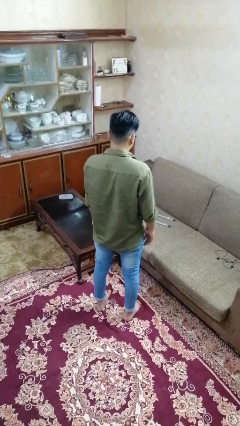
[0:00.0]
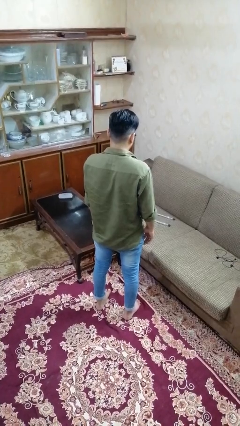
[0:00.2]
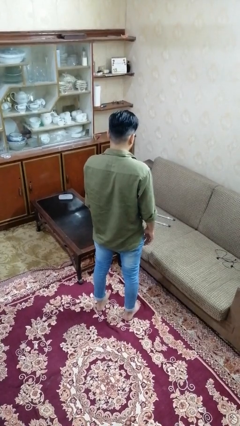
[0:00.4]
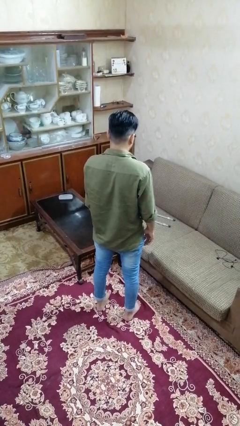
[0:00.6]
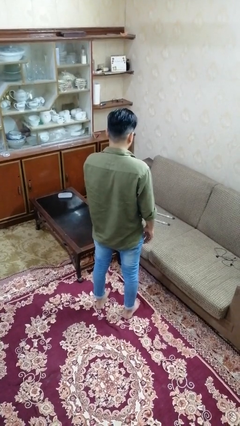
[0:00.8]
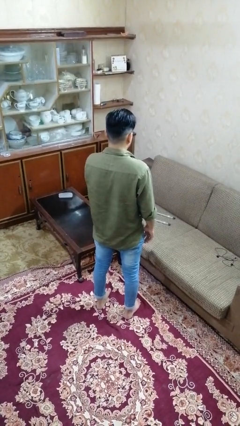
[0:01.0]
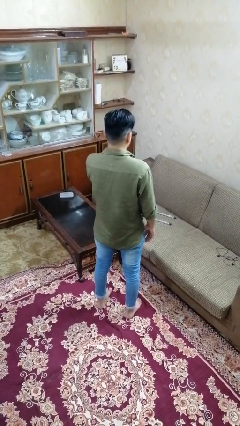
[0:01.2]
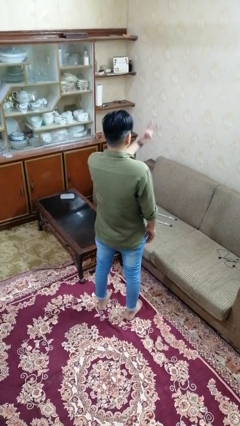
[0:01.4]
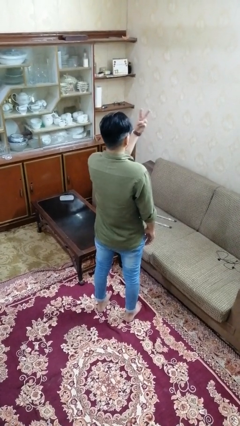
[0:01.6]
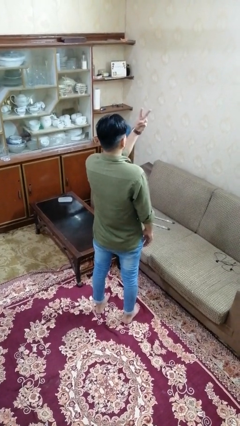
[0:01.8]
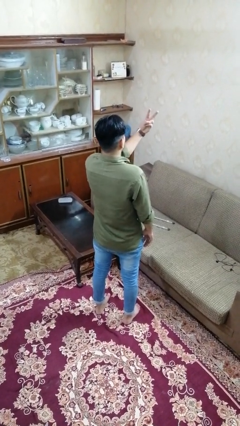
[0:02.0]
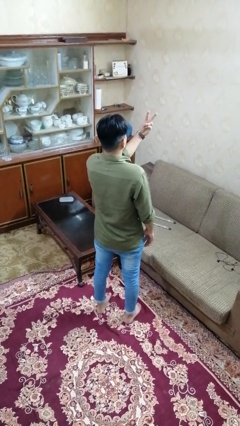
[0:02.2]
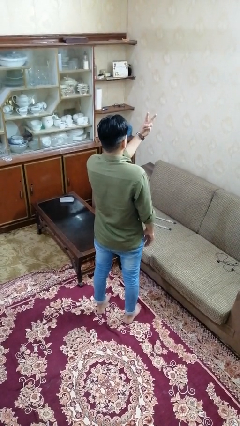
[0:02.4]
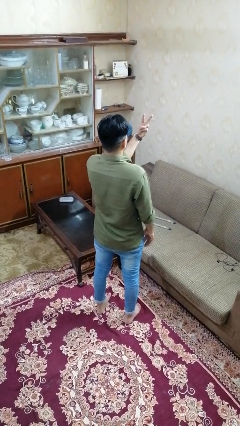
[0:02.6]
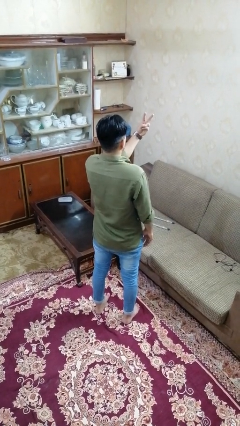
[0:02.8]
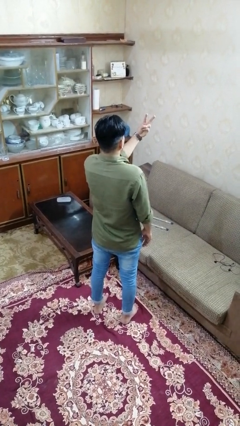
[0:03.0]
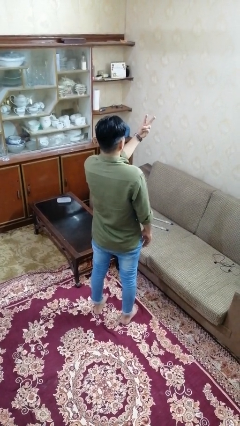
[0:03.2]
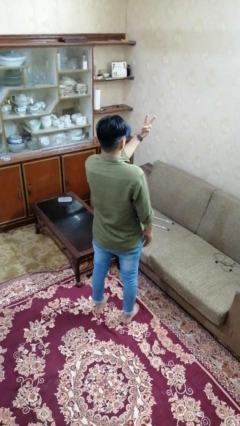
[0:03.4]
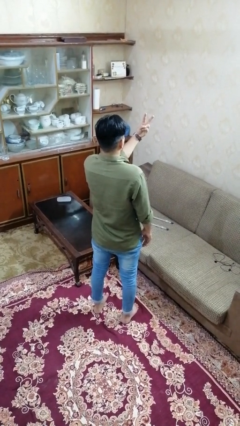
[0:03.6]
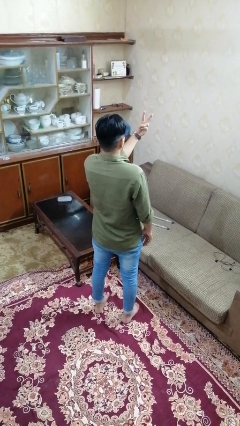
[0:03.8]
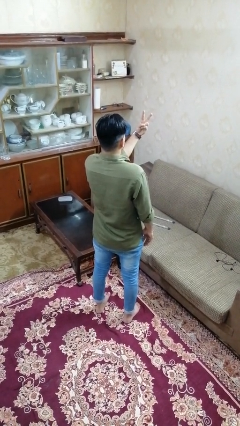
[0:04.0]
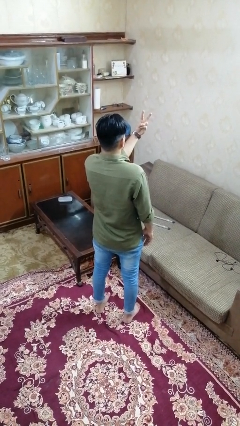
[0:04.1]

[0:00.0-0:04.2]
person gestures peace

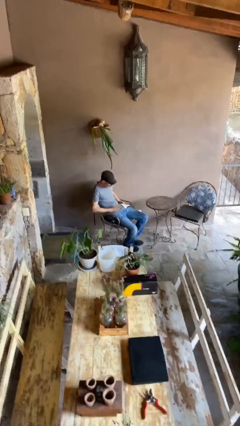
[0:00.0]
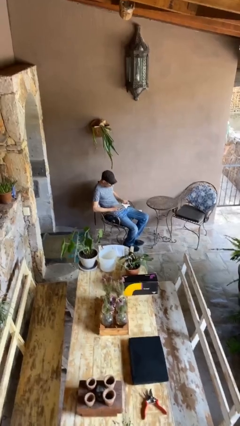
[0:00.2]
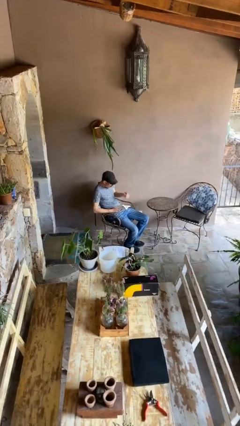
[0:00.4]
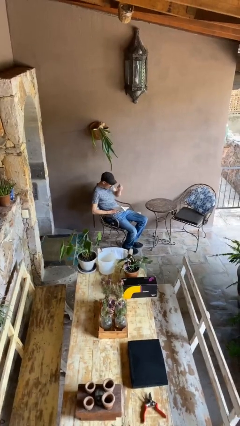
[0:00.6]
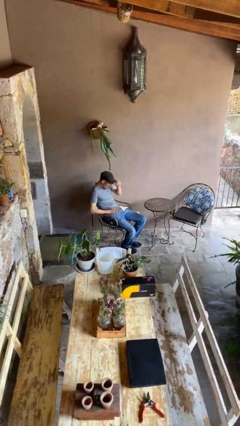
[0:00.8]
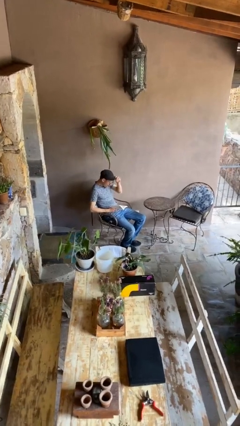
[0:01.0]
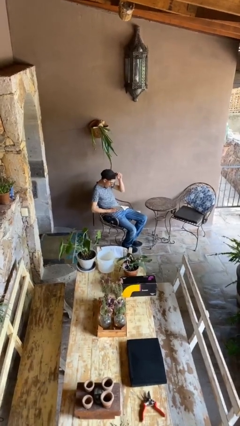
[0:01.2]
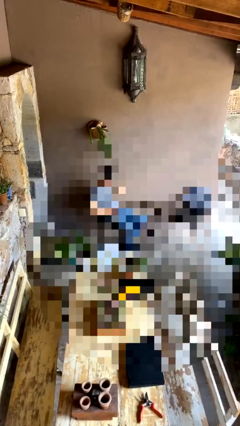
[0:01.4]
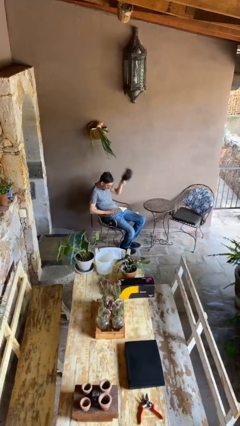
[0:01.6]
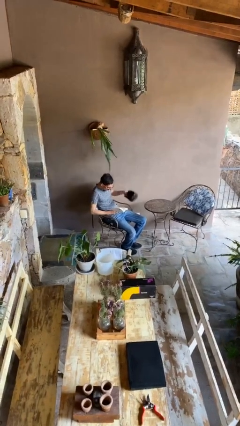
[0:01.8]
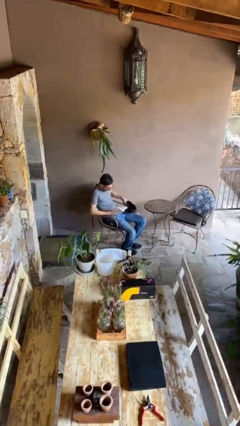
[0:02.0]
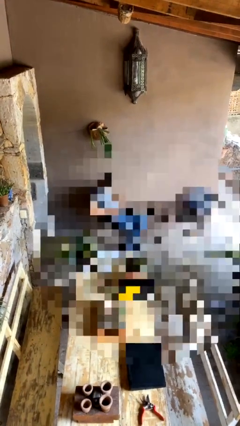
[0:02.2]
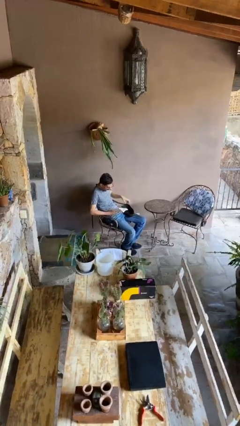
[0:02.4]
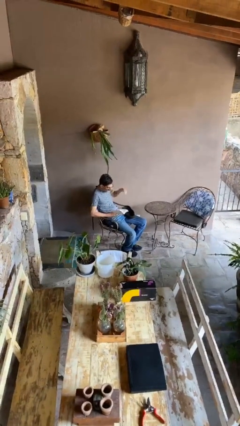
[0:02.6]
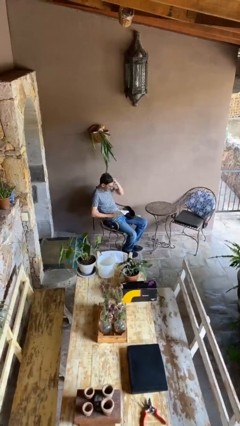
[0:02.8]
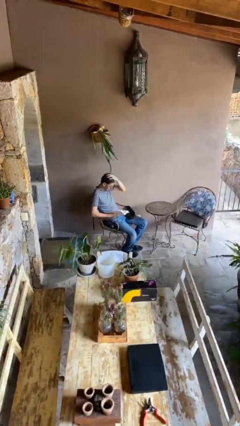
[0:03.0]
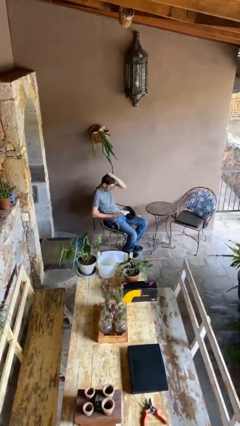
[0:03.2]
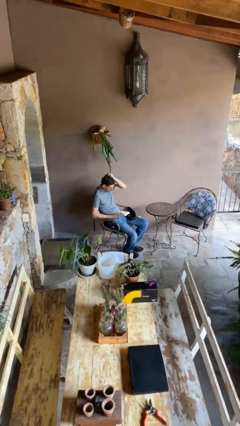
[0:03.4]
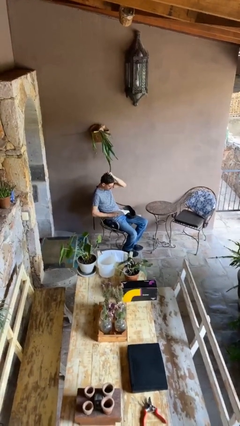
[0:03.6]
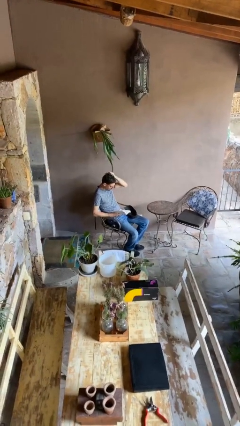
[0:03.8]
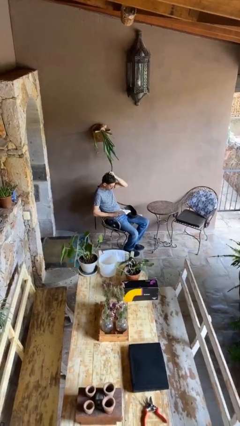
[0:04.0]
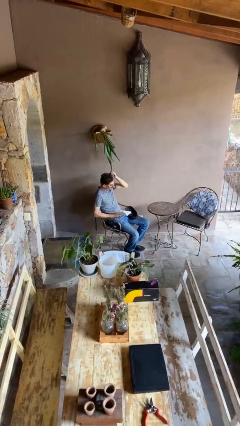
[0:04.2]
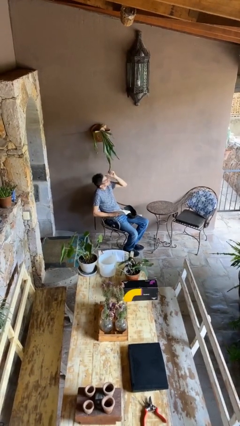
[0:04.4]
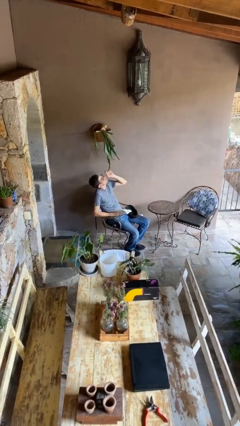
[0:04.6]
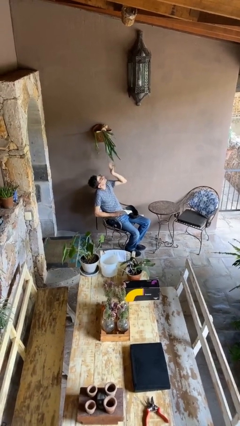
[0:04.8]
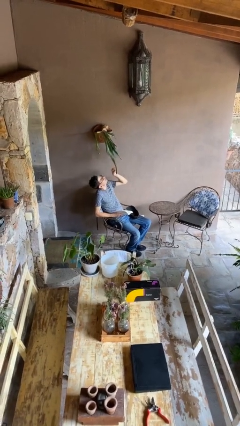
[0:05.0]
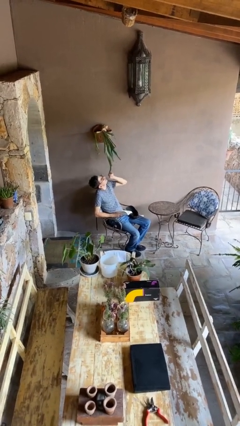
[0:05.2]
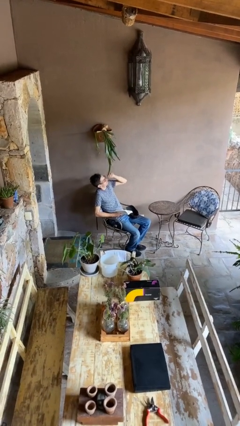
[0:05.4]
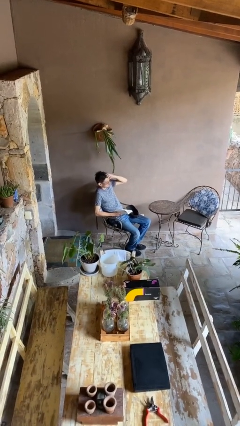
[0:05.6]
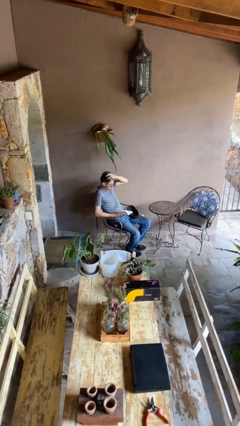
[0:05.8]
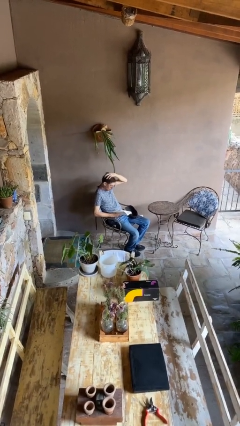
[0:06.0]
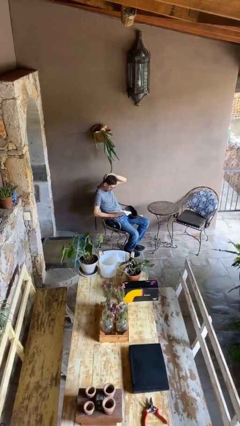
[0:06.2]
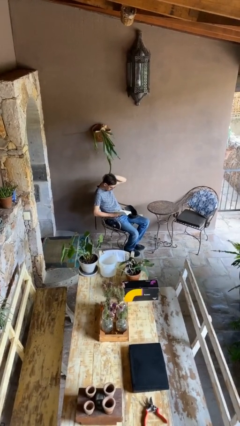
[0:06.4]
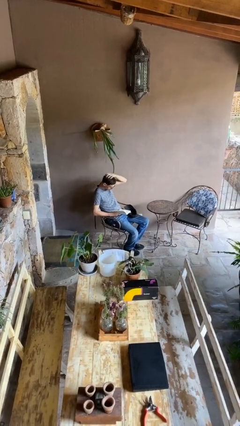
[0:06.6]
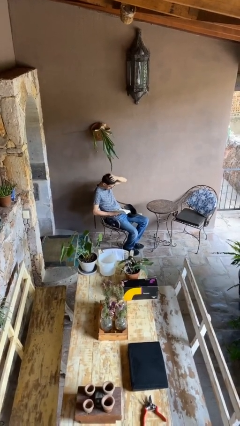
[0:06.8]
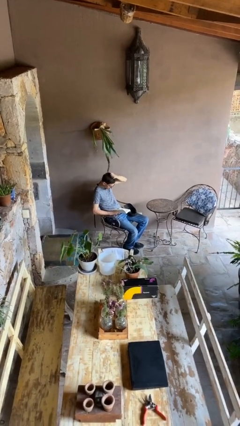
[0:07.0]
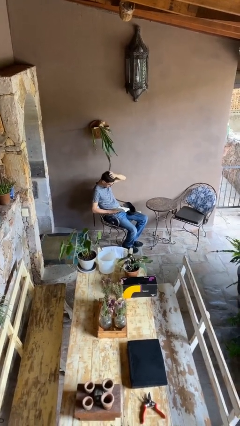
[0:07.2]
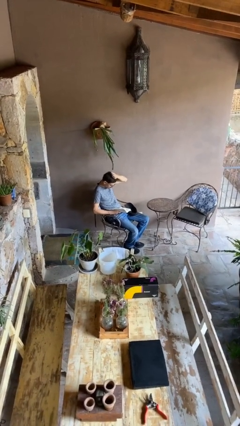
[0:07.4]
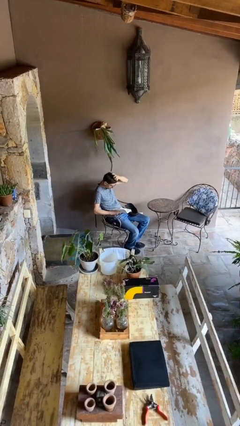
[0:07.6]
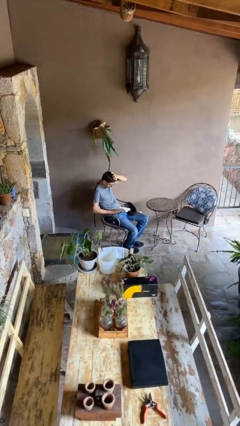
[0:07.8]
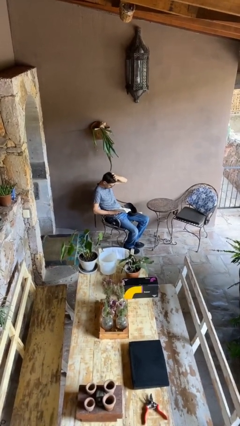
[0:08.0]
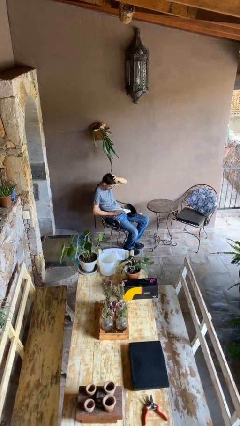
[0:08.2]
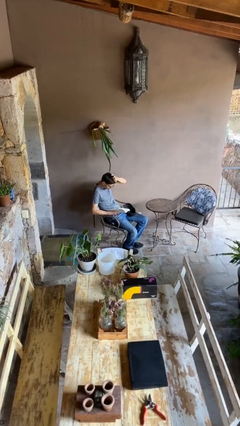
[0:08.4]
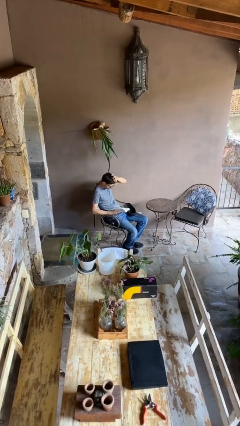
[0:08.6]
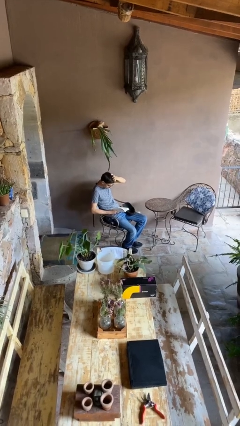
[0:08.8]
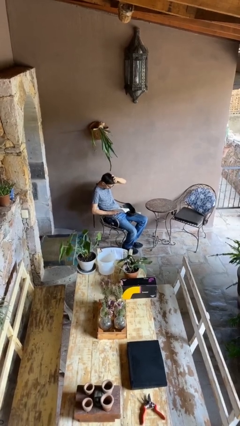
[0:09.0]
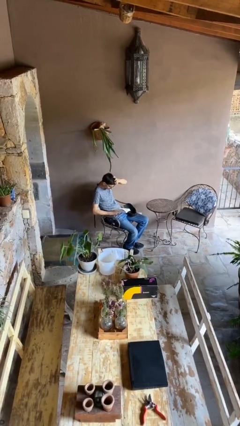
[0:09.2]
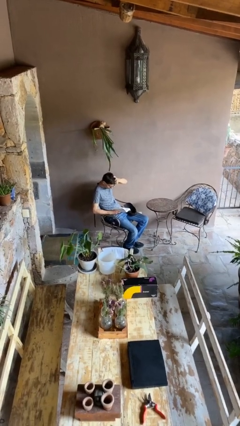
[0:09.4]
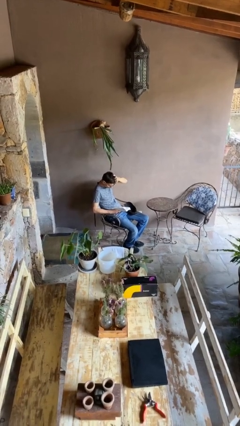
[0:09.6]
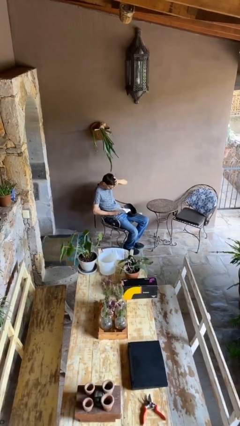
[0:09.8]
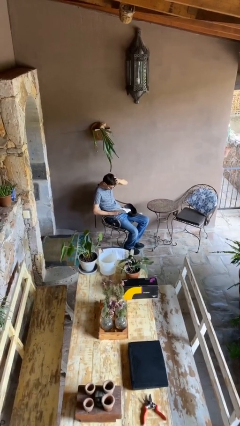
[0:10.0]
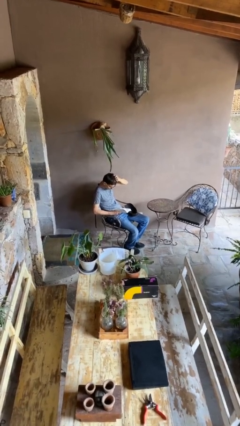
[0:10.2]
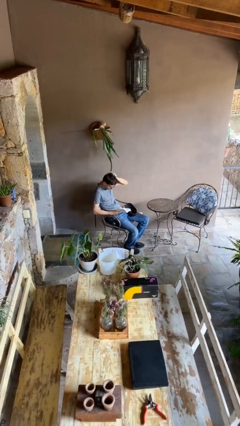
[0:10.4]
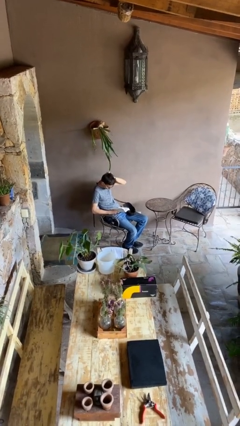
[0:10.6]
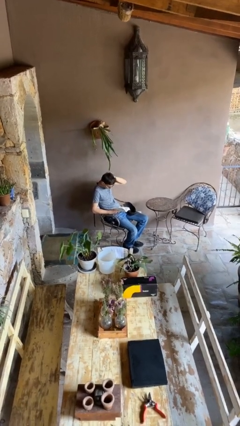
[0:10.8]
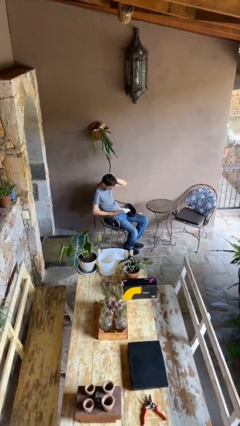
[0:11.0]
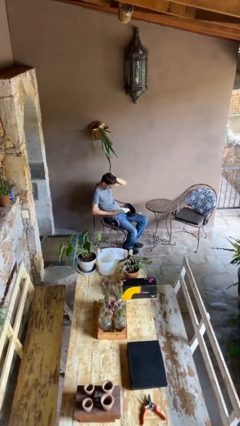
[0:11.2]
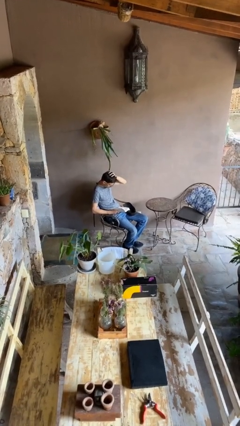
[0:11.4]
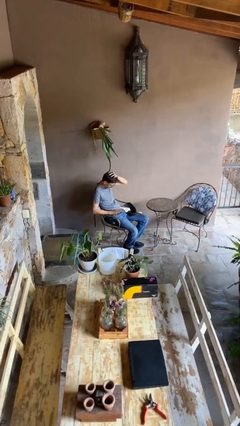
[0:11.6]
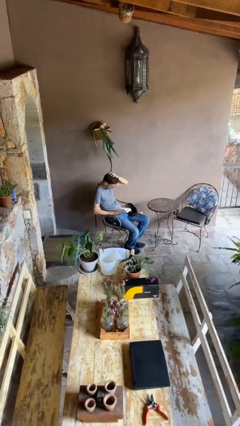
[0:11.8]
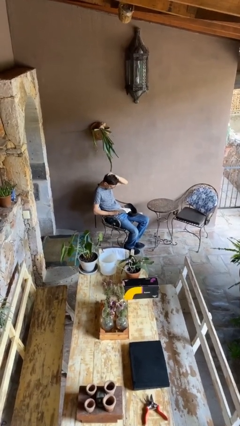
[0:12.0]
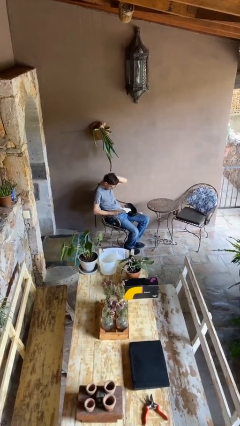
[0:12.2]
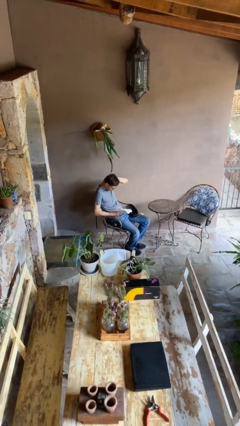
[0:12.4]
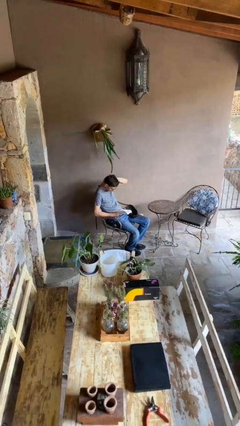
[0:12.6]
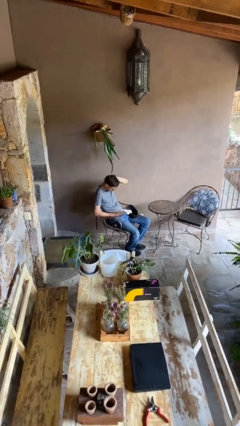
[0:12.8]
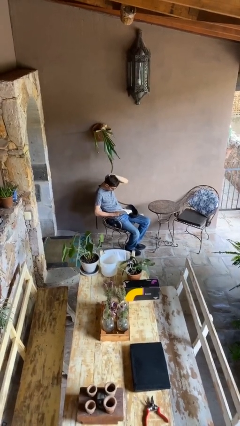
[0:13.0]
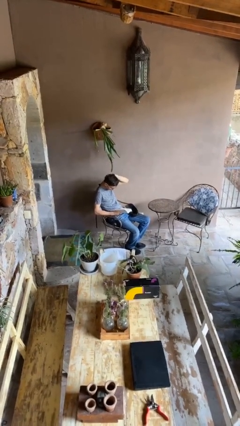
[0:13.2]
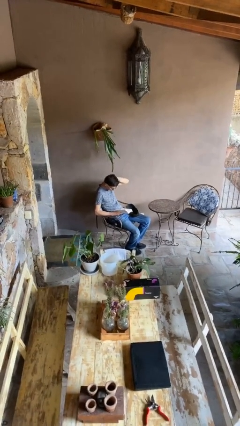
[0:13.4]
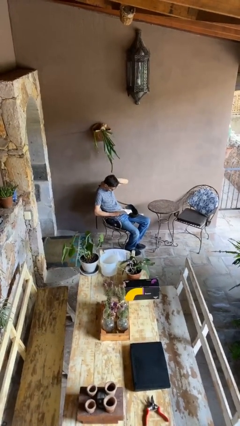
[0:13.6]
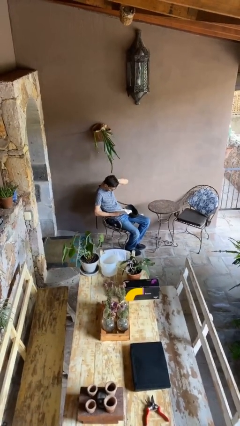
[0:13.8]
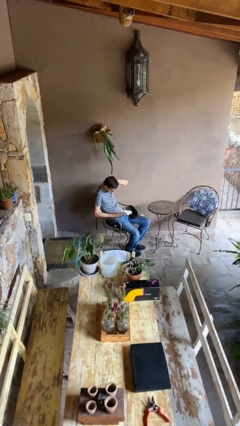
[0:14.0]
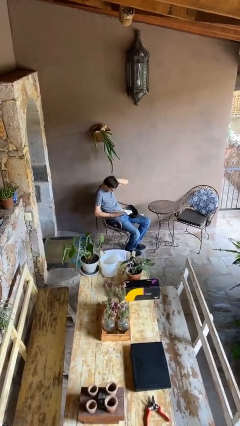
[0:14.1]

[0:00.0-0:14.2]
person reads document
